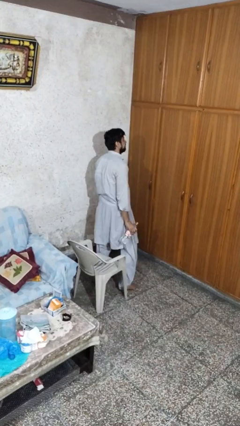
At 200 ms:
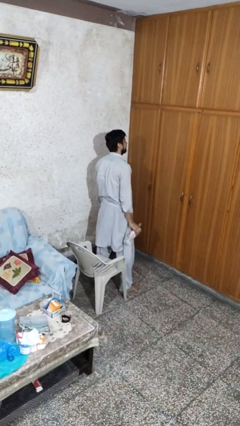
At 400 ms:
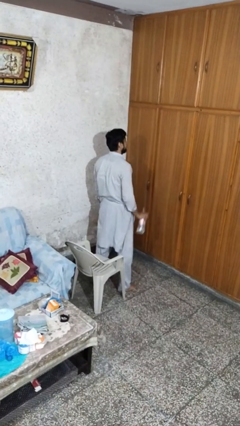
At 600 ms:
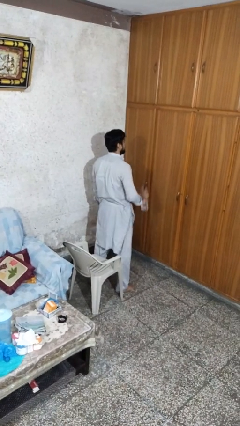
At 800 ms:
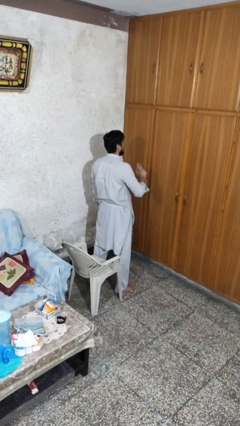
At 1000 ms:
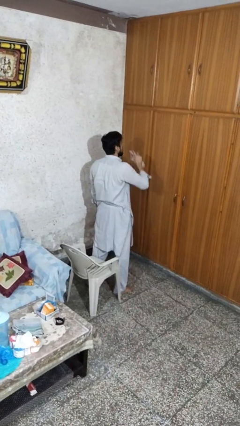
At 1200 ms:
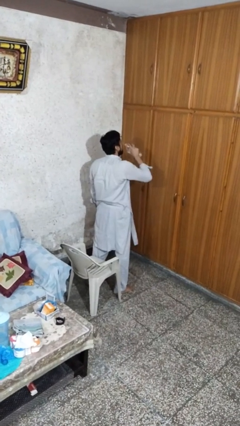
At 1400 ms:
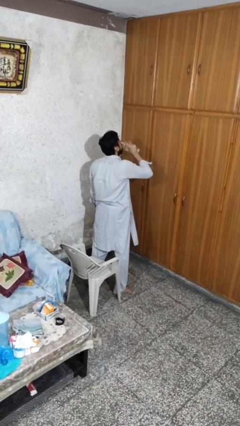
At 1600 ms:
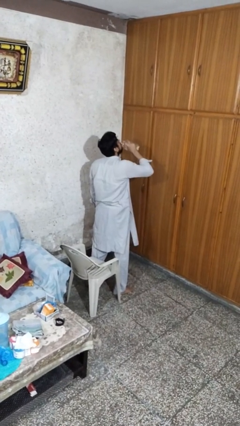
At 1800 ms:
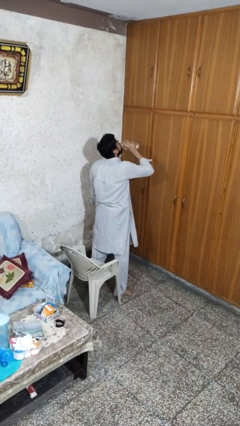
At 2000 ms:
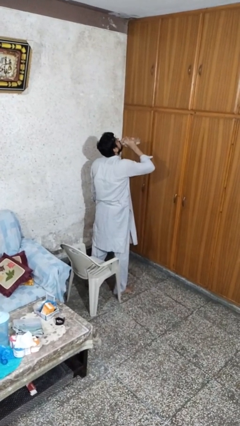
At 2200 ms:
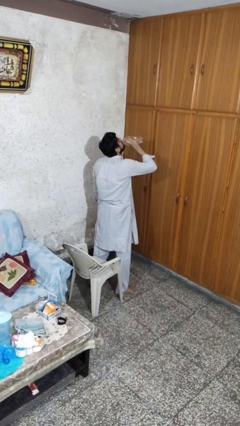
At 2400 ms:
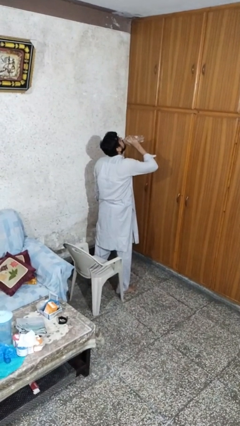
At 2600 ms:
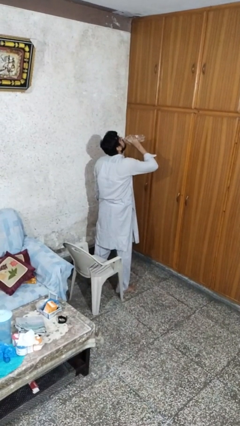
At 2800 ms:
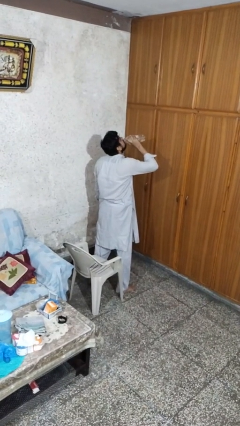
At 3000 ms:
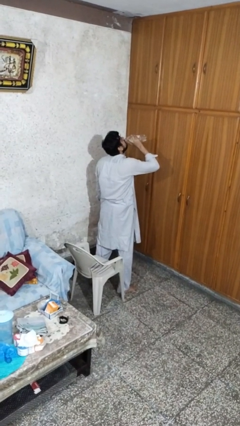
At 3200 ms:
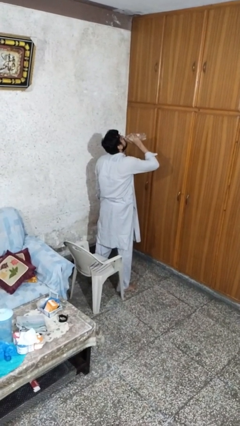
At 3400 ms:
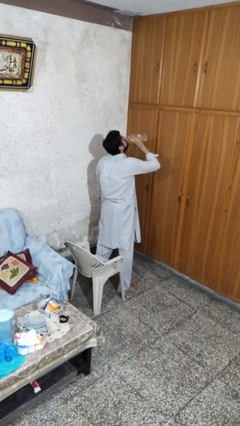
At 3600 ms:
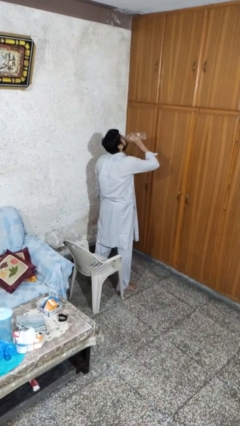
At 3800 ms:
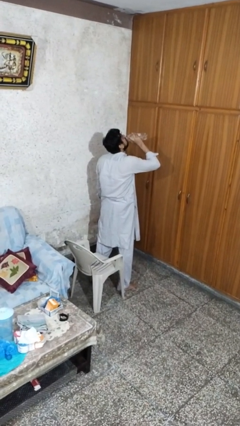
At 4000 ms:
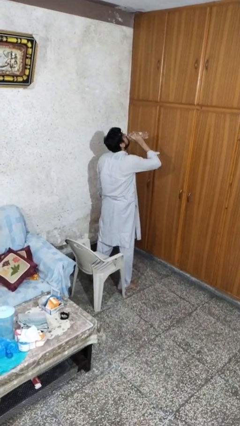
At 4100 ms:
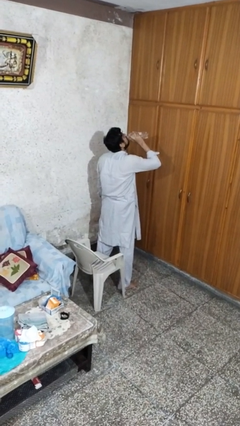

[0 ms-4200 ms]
person drinks from bottle

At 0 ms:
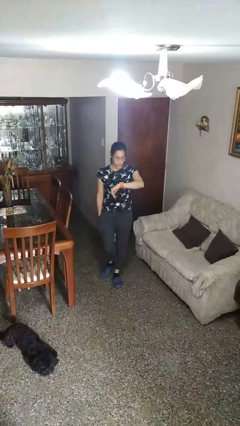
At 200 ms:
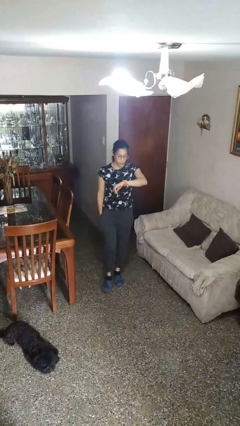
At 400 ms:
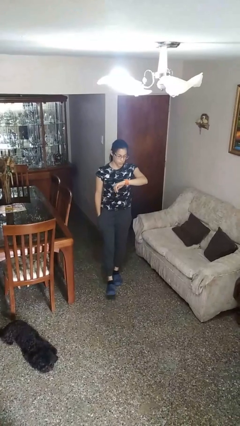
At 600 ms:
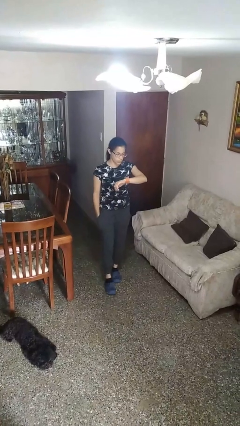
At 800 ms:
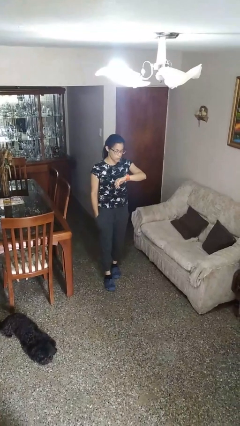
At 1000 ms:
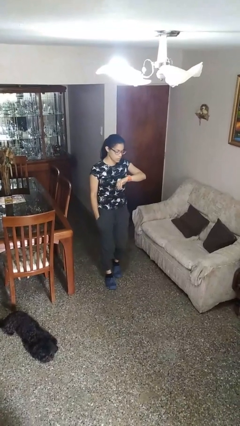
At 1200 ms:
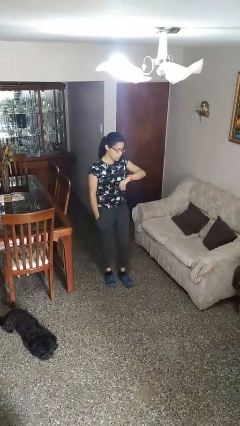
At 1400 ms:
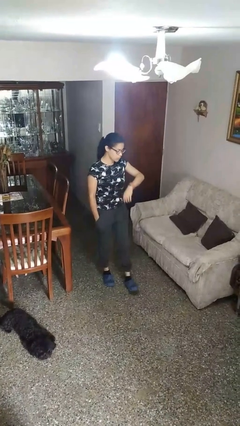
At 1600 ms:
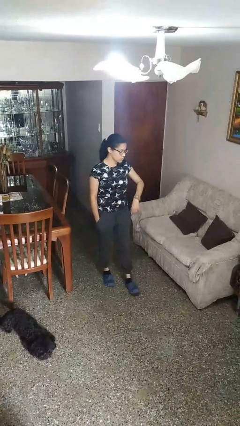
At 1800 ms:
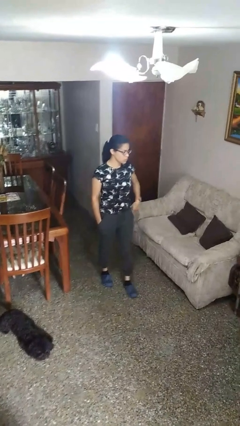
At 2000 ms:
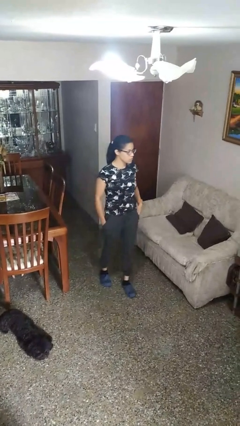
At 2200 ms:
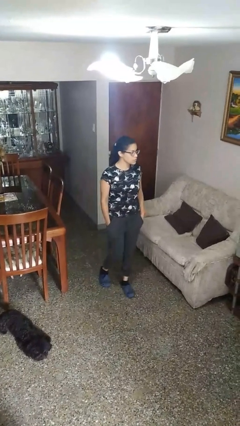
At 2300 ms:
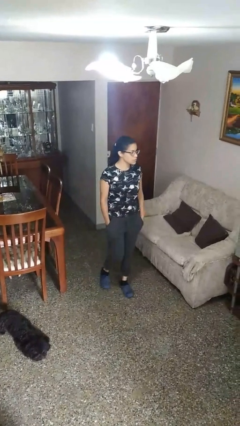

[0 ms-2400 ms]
person looks at wristwatch

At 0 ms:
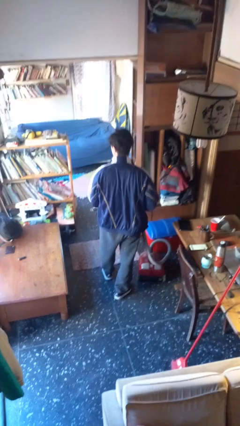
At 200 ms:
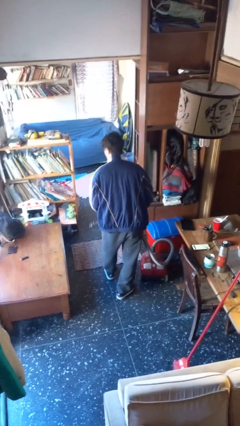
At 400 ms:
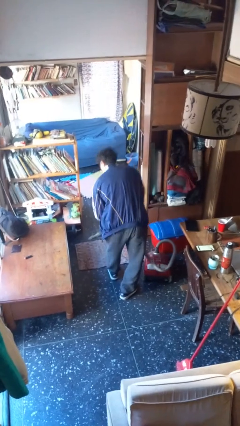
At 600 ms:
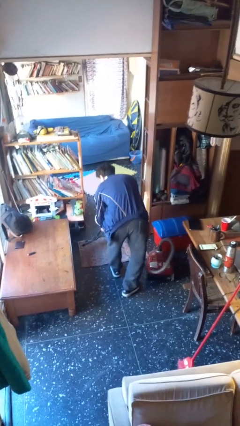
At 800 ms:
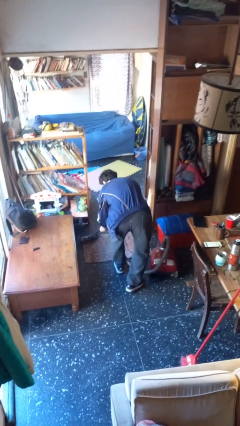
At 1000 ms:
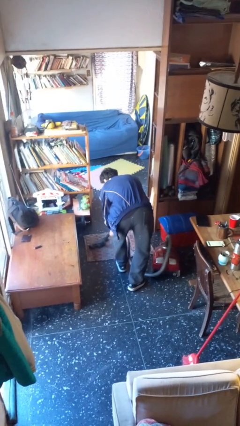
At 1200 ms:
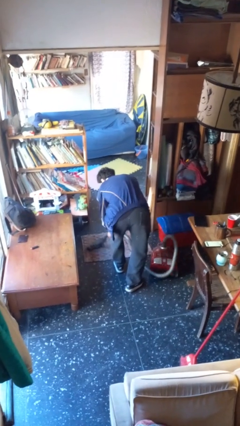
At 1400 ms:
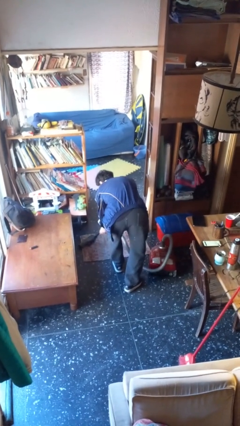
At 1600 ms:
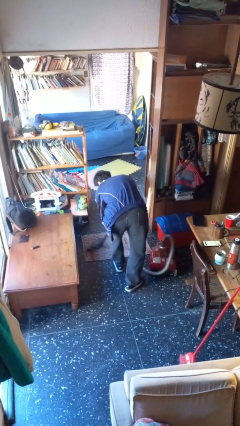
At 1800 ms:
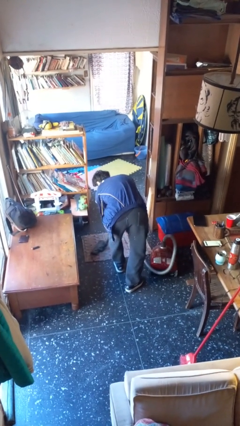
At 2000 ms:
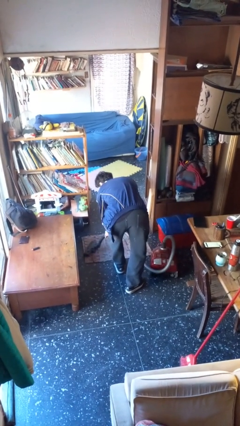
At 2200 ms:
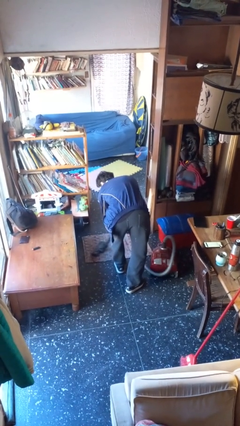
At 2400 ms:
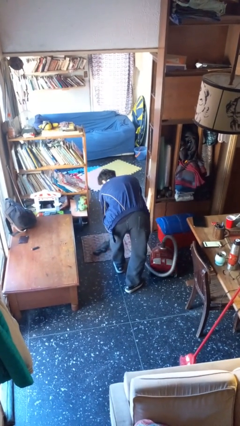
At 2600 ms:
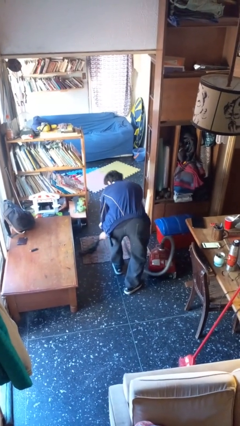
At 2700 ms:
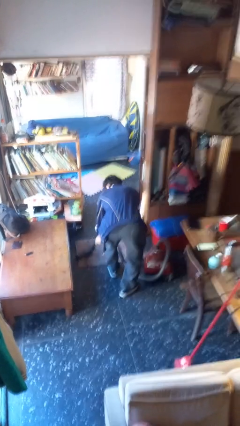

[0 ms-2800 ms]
person vacuums carpet

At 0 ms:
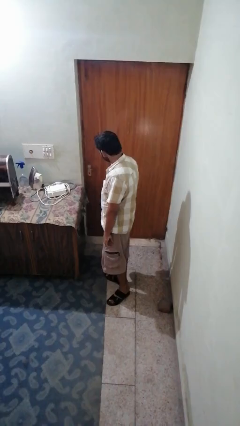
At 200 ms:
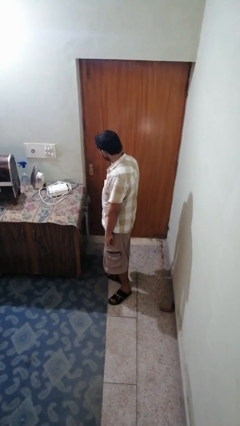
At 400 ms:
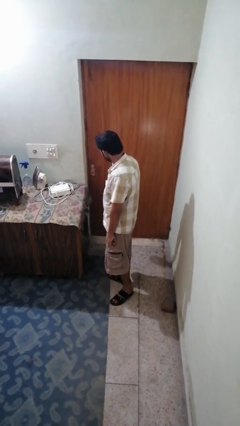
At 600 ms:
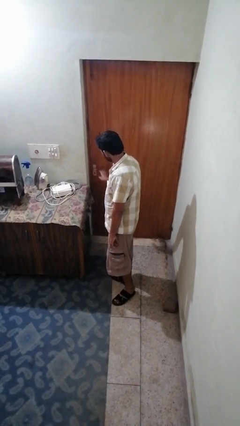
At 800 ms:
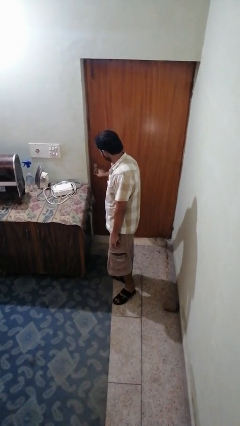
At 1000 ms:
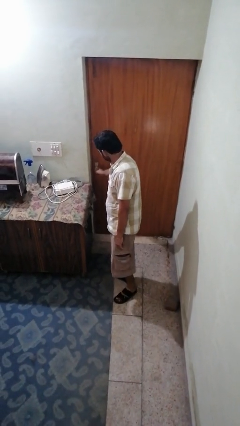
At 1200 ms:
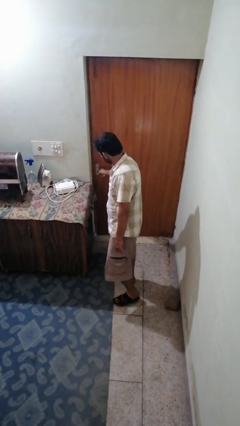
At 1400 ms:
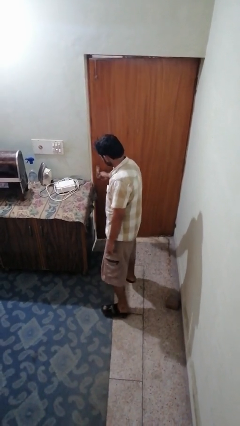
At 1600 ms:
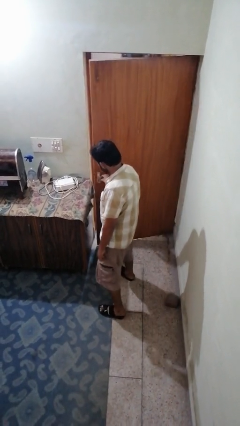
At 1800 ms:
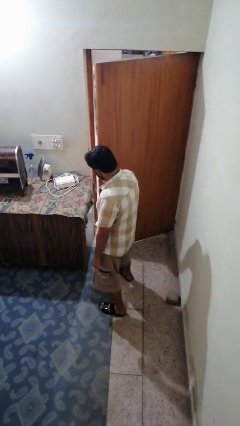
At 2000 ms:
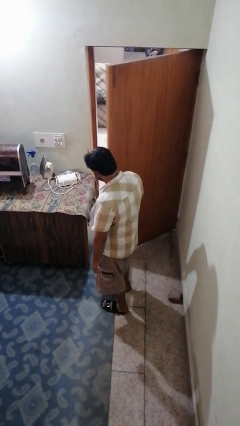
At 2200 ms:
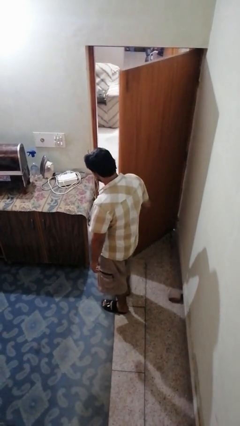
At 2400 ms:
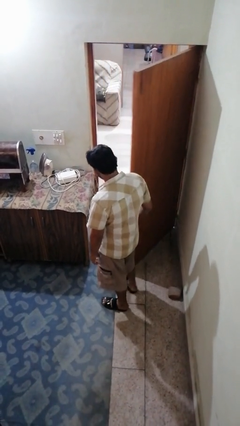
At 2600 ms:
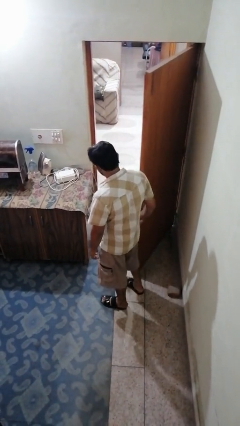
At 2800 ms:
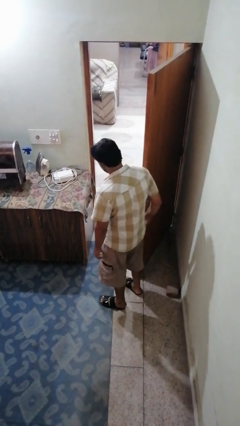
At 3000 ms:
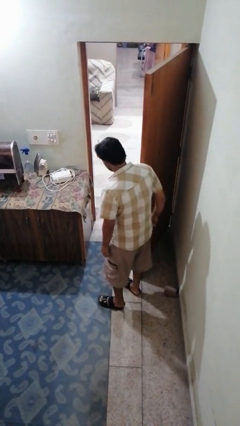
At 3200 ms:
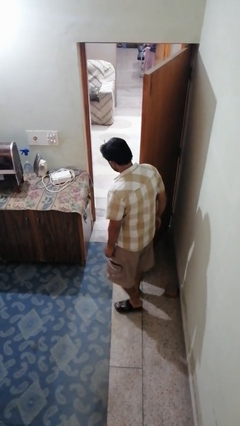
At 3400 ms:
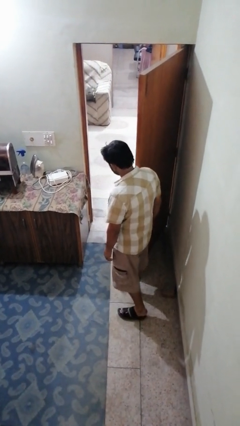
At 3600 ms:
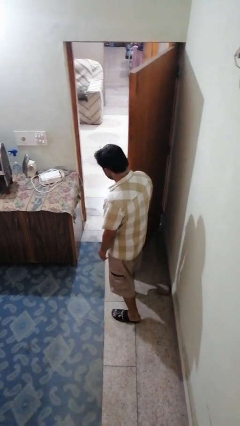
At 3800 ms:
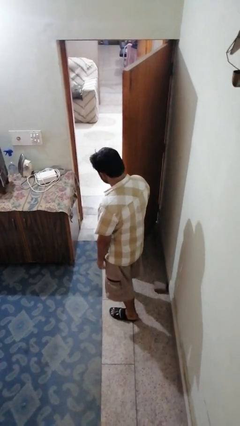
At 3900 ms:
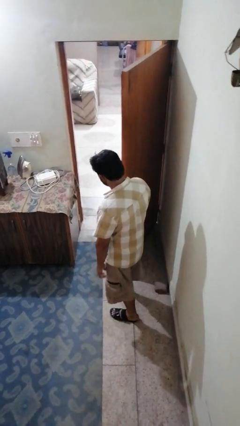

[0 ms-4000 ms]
person opens facility door

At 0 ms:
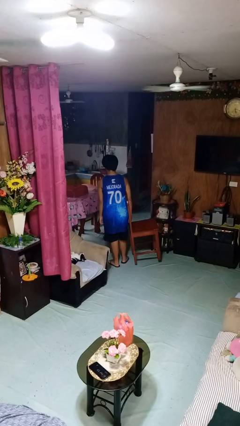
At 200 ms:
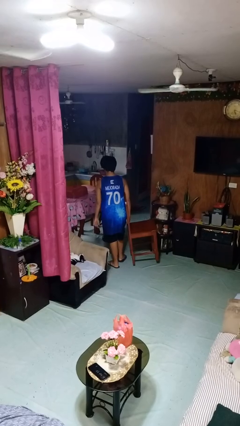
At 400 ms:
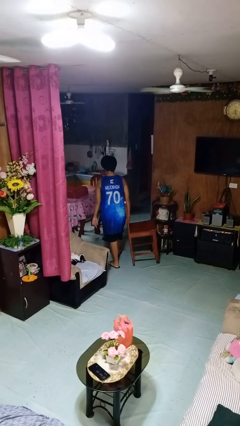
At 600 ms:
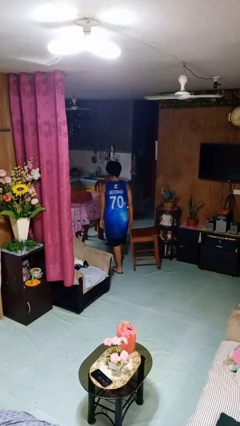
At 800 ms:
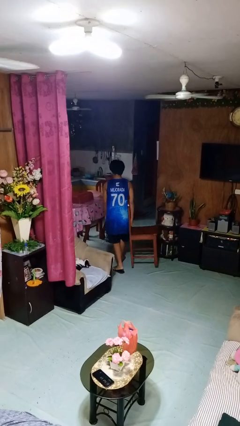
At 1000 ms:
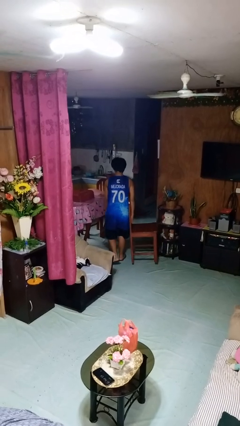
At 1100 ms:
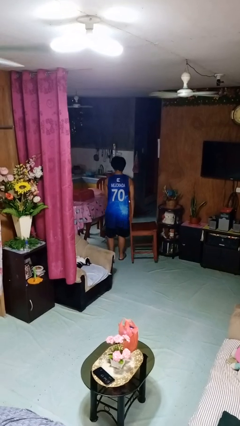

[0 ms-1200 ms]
person carries furniture

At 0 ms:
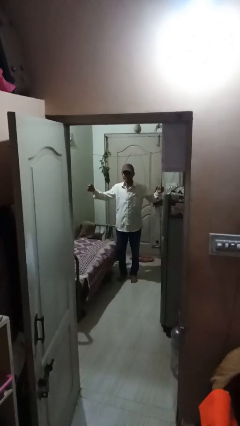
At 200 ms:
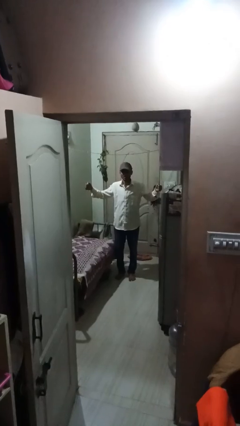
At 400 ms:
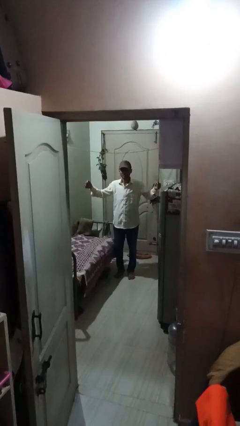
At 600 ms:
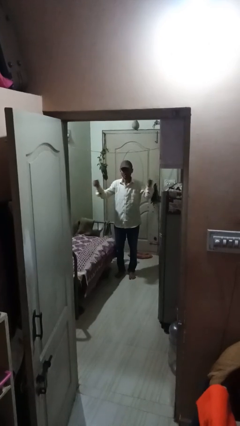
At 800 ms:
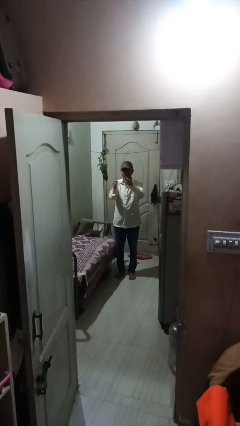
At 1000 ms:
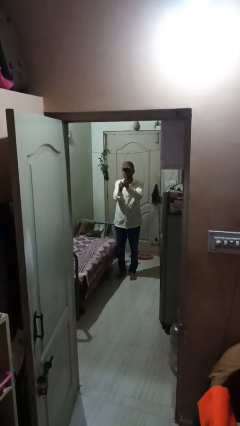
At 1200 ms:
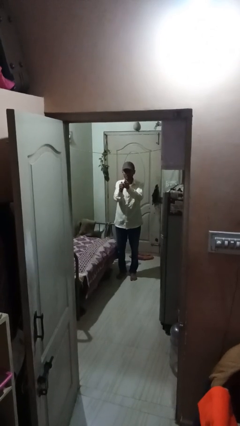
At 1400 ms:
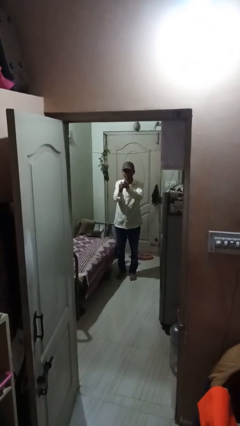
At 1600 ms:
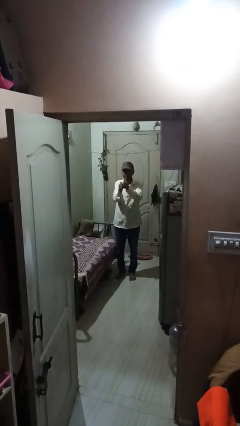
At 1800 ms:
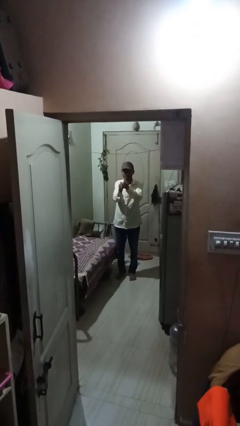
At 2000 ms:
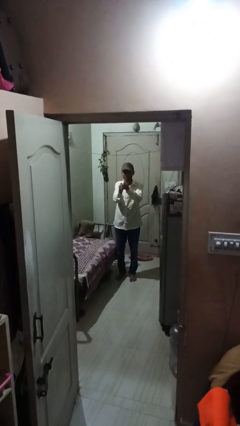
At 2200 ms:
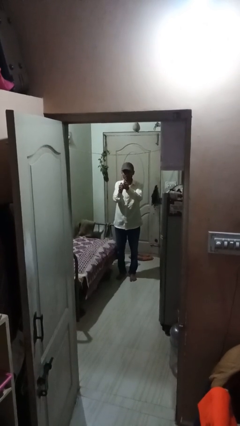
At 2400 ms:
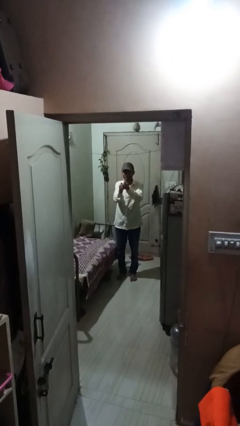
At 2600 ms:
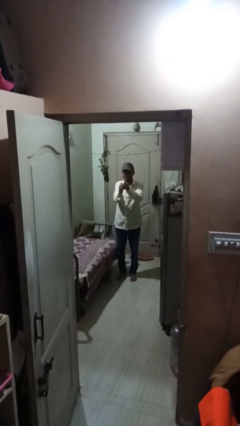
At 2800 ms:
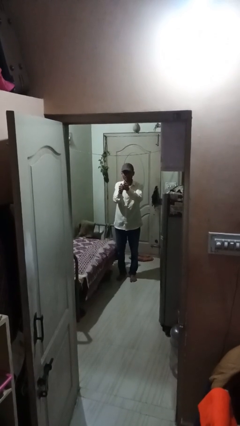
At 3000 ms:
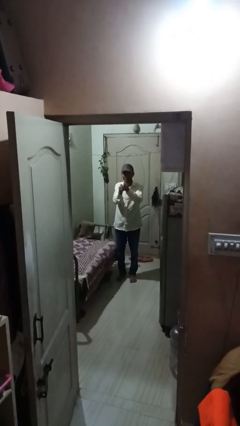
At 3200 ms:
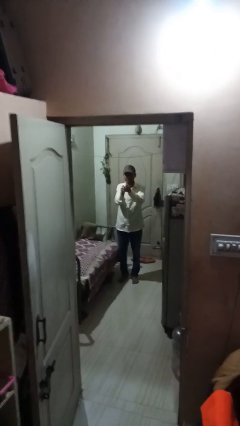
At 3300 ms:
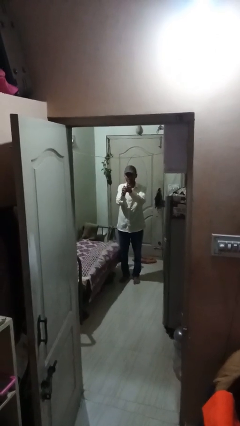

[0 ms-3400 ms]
person gestures zoom in
